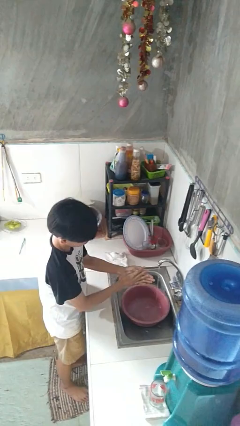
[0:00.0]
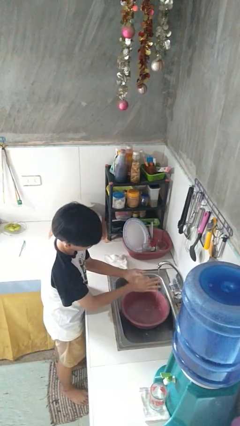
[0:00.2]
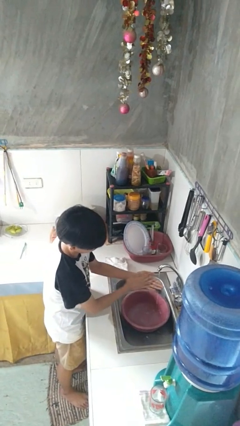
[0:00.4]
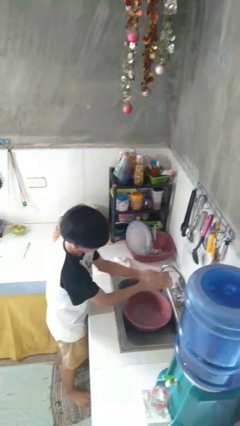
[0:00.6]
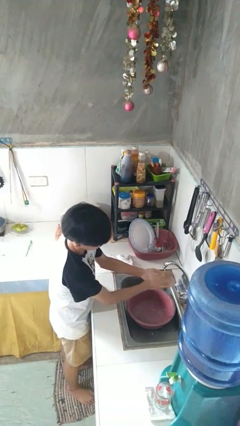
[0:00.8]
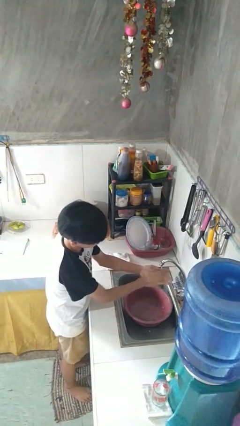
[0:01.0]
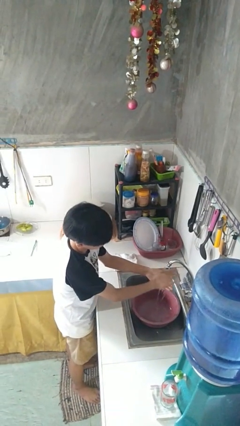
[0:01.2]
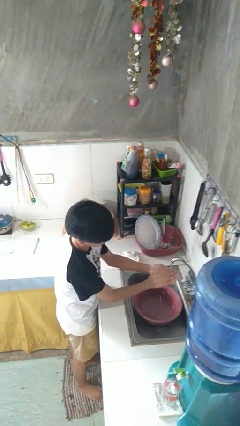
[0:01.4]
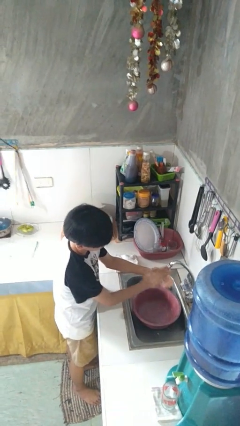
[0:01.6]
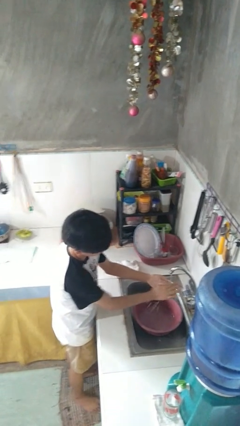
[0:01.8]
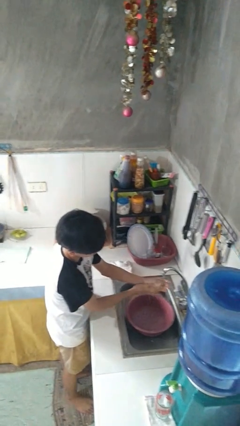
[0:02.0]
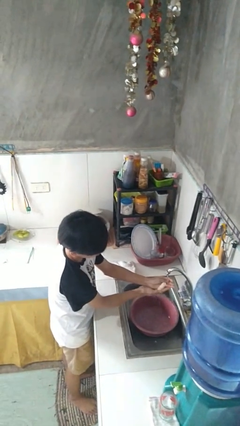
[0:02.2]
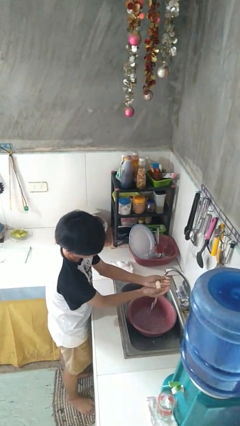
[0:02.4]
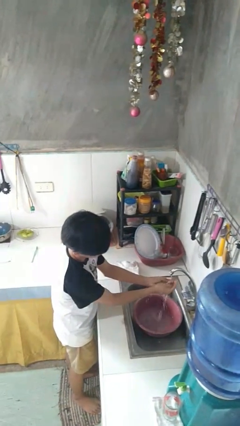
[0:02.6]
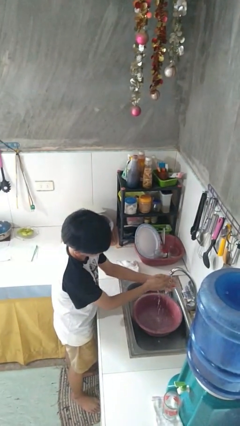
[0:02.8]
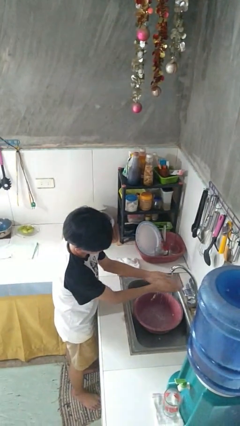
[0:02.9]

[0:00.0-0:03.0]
person washes hands

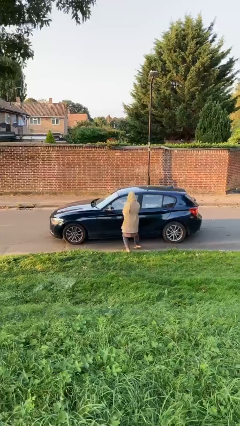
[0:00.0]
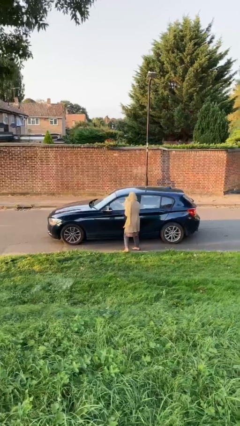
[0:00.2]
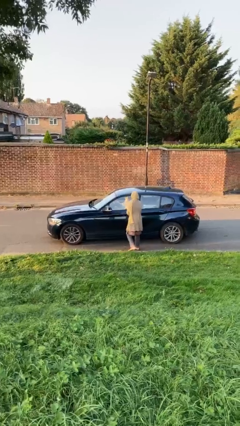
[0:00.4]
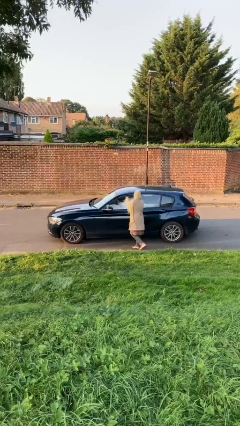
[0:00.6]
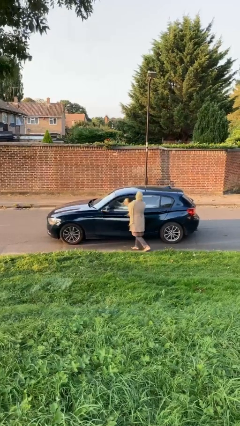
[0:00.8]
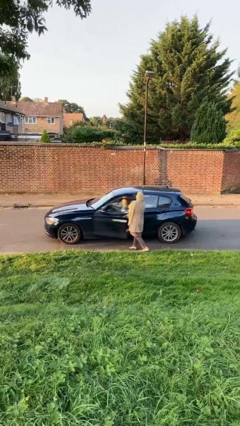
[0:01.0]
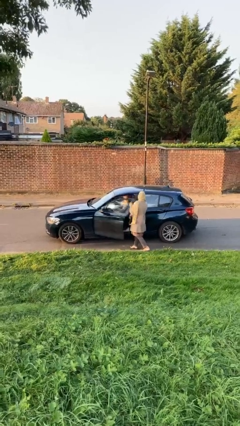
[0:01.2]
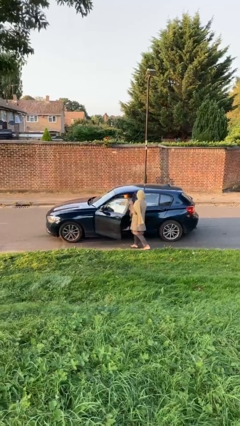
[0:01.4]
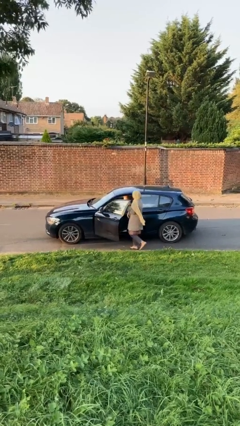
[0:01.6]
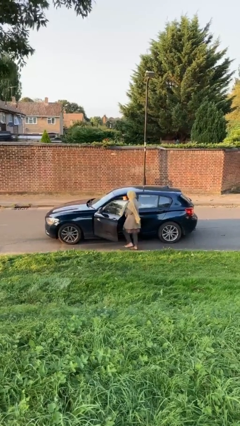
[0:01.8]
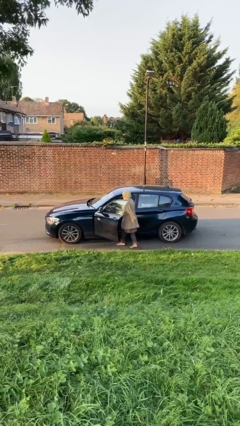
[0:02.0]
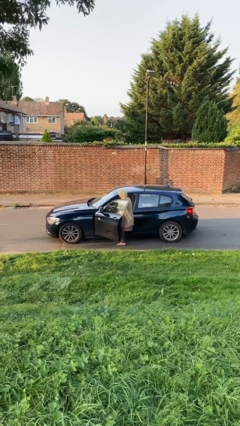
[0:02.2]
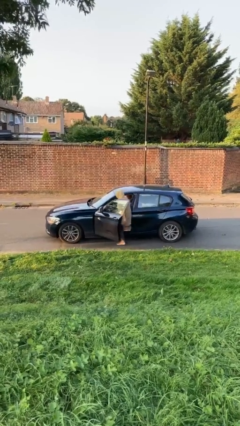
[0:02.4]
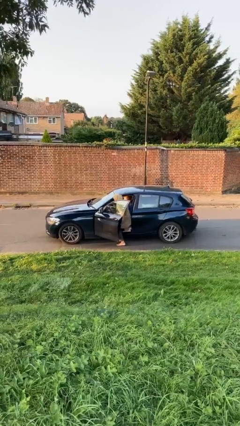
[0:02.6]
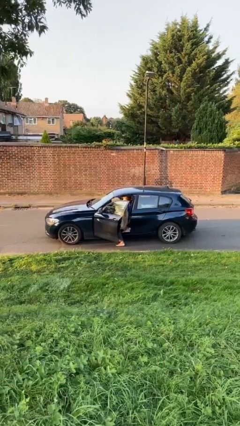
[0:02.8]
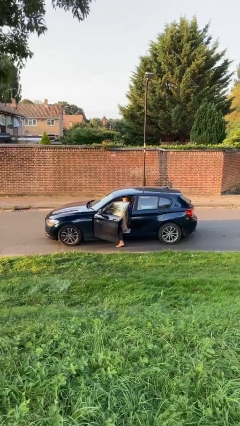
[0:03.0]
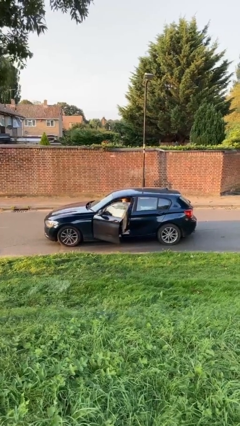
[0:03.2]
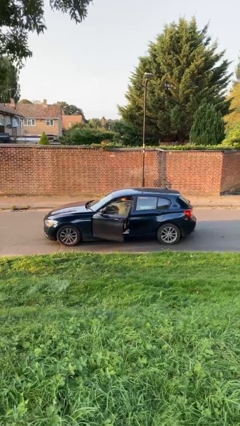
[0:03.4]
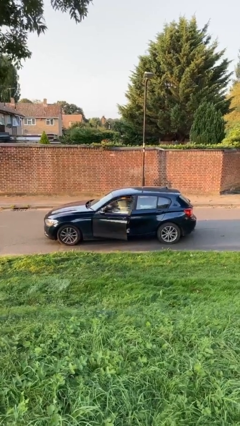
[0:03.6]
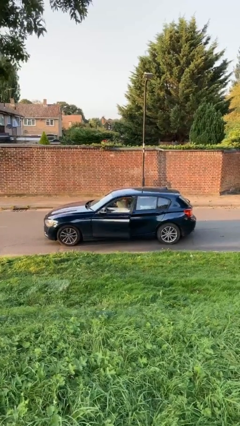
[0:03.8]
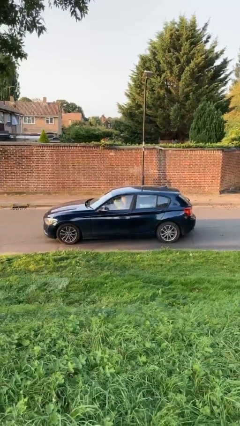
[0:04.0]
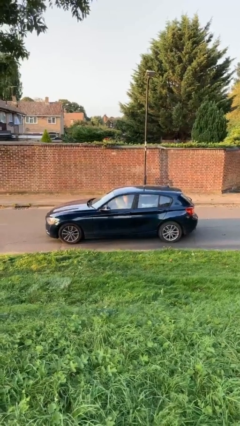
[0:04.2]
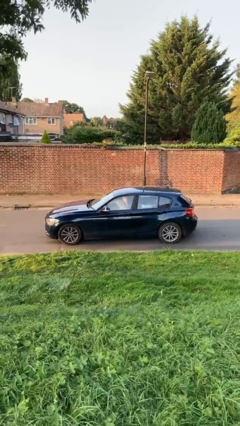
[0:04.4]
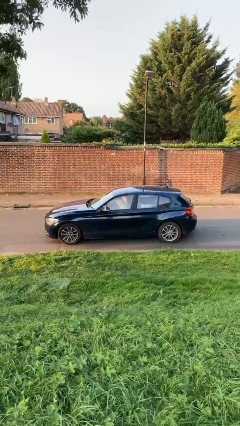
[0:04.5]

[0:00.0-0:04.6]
car picks up person

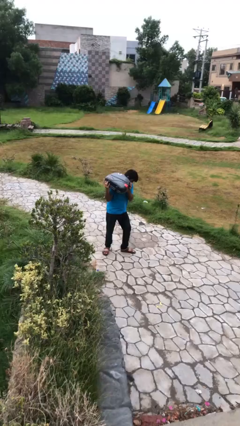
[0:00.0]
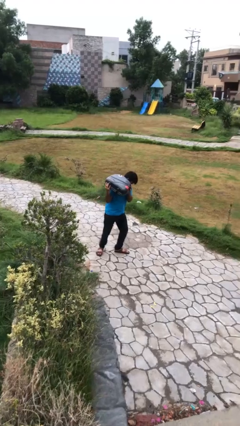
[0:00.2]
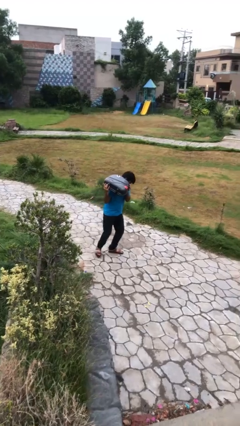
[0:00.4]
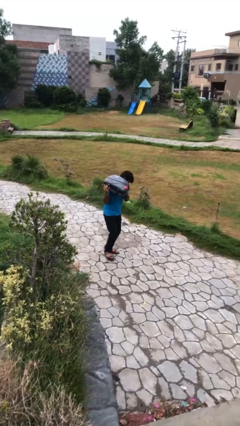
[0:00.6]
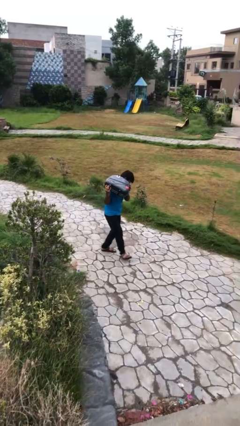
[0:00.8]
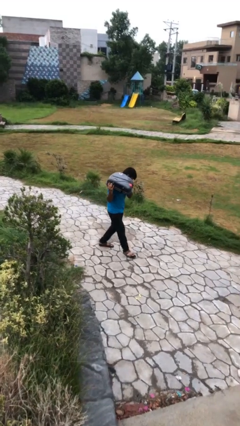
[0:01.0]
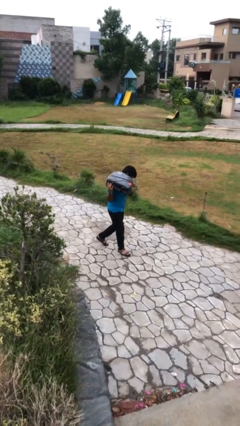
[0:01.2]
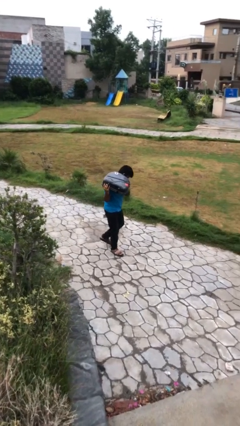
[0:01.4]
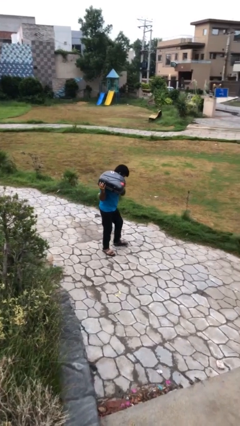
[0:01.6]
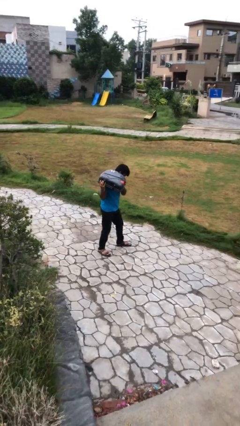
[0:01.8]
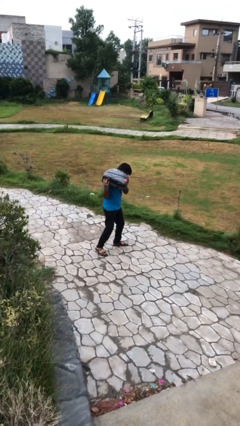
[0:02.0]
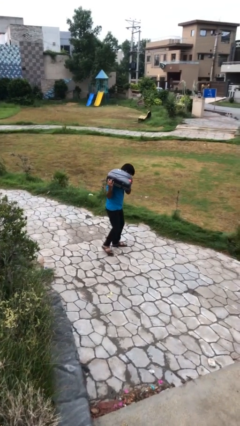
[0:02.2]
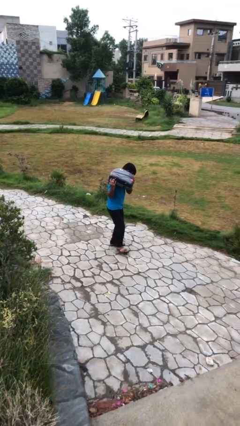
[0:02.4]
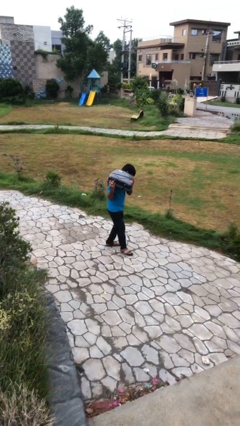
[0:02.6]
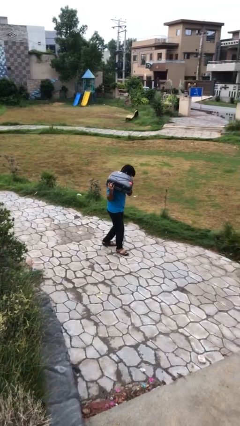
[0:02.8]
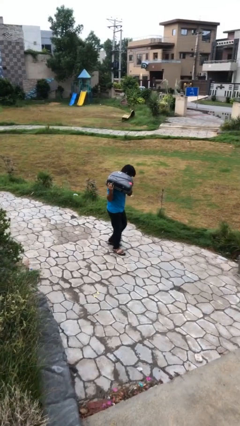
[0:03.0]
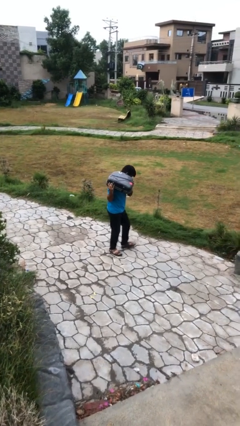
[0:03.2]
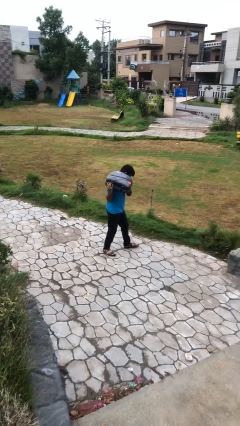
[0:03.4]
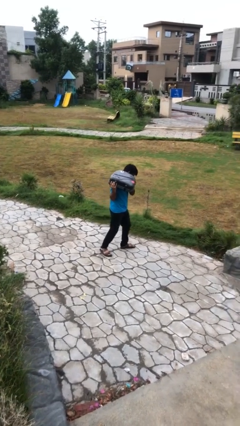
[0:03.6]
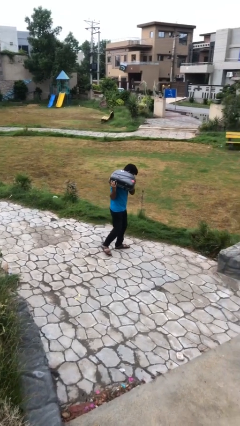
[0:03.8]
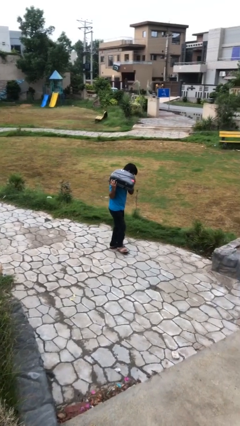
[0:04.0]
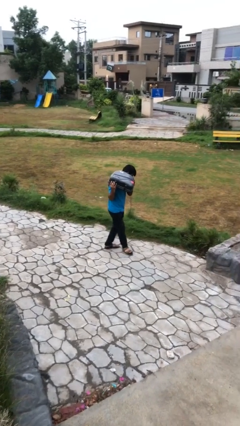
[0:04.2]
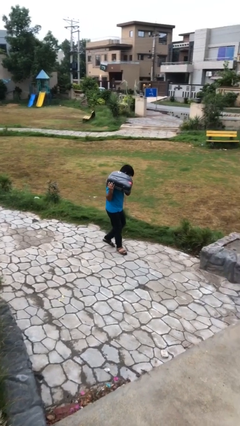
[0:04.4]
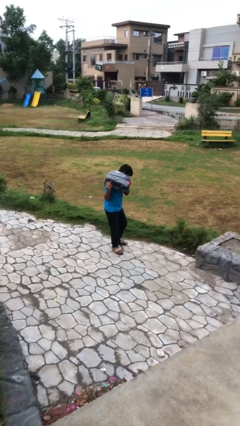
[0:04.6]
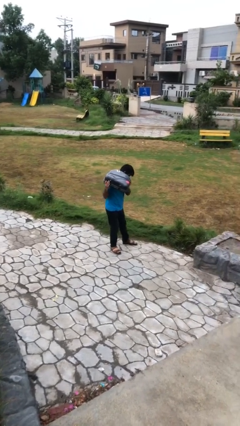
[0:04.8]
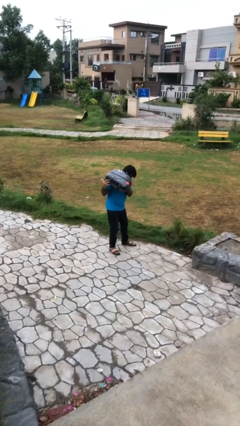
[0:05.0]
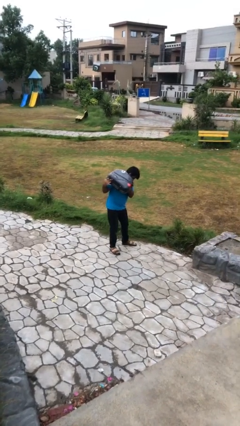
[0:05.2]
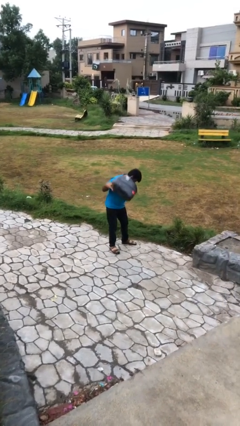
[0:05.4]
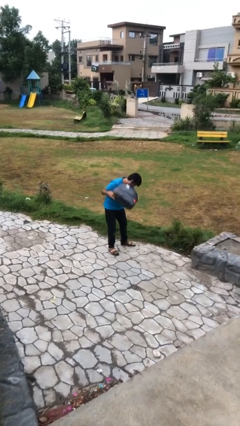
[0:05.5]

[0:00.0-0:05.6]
person carries heavy object

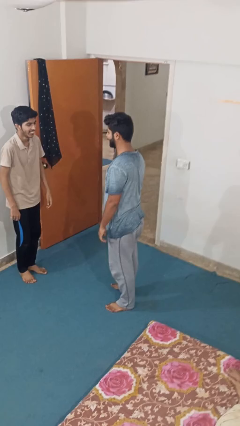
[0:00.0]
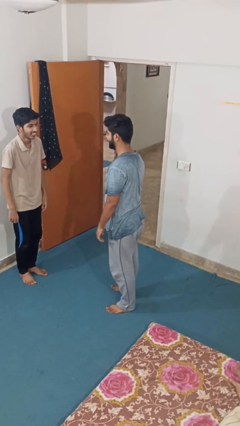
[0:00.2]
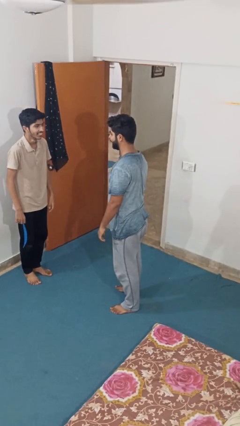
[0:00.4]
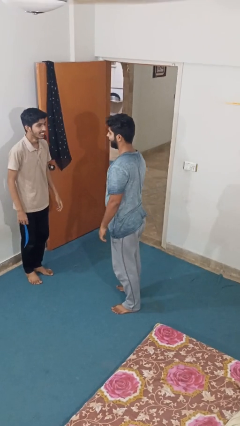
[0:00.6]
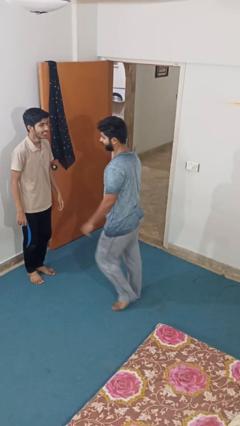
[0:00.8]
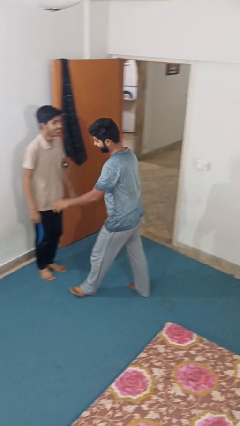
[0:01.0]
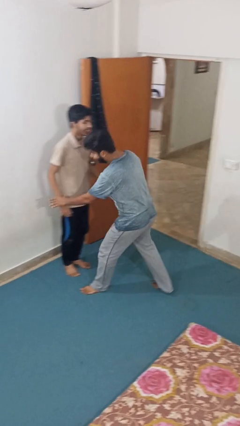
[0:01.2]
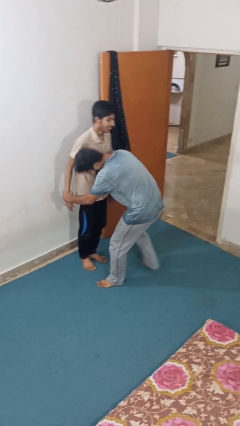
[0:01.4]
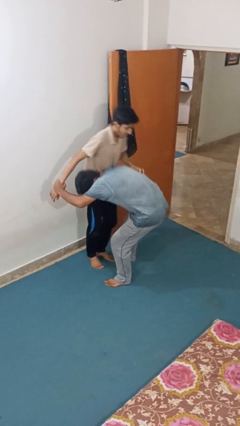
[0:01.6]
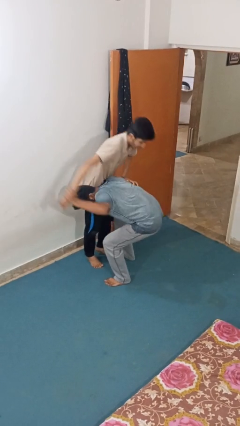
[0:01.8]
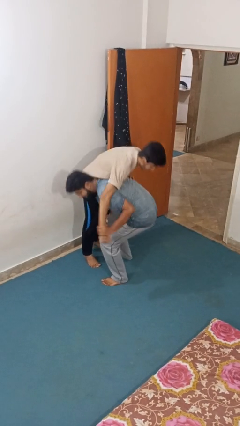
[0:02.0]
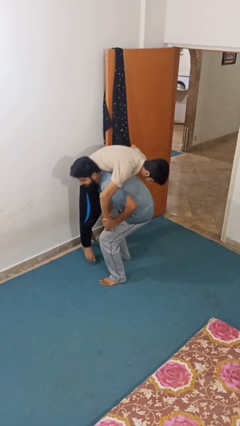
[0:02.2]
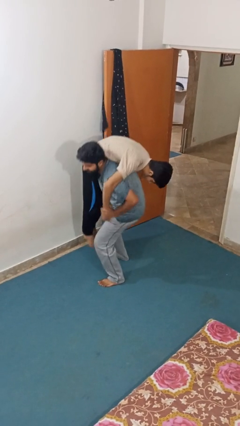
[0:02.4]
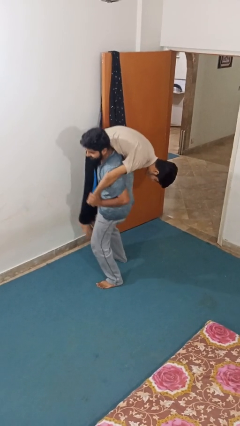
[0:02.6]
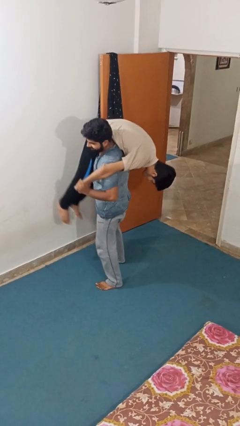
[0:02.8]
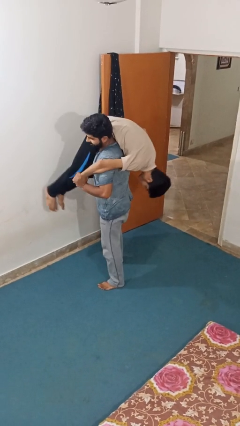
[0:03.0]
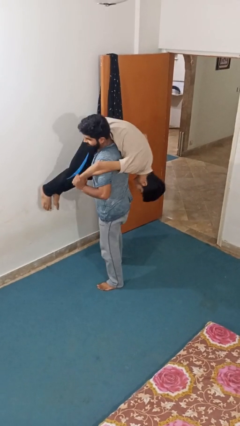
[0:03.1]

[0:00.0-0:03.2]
person carries person over shoulder

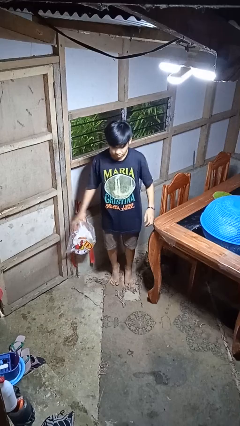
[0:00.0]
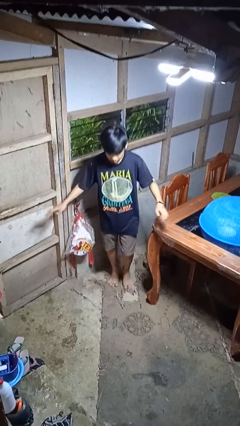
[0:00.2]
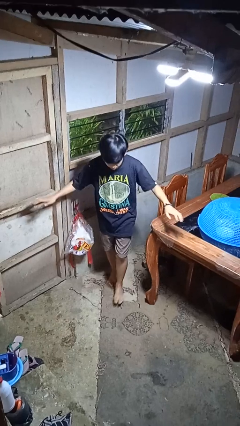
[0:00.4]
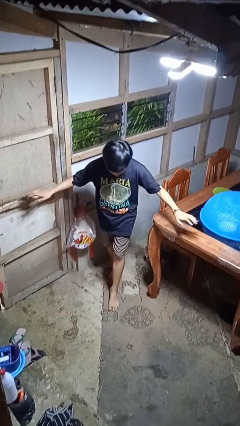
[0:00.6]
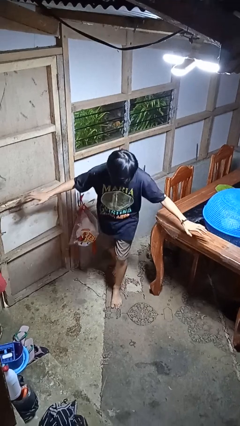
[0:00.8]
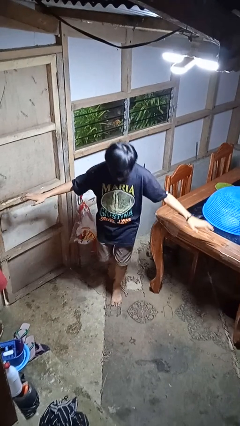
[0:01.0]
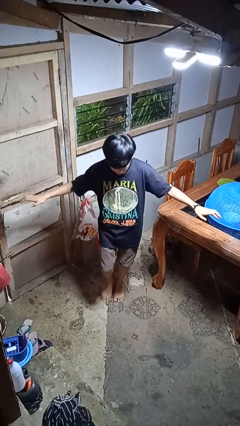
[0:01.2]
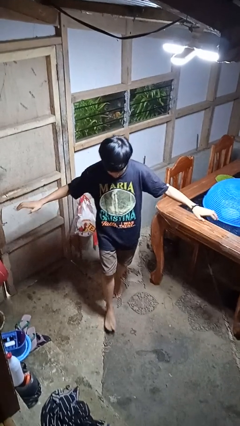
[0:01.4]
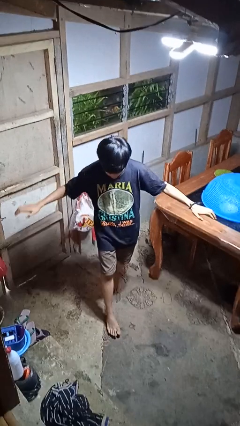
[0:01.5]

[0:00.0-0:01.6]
person walks tiptoe
